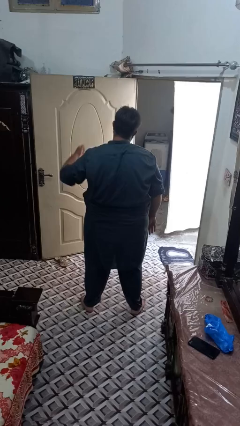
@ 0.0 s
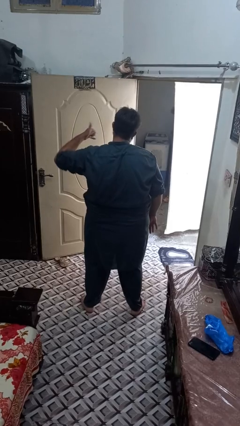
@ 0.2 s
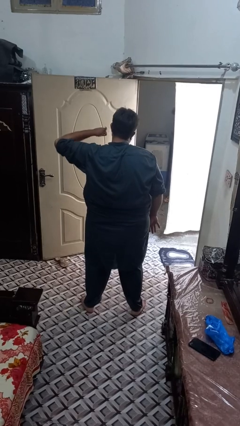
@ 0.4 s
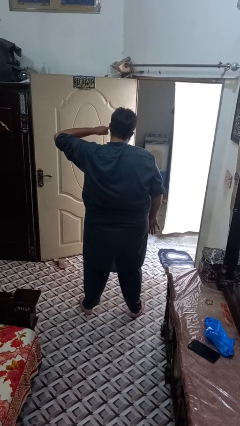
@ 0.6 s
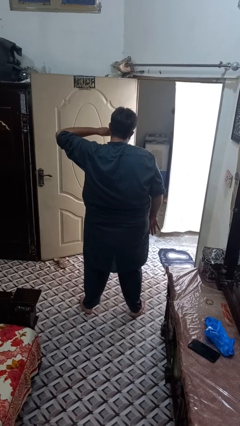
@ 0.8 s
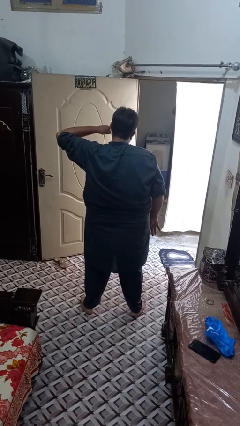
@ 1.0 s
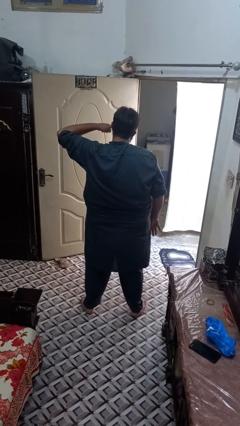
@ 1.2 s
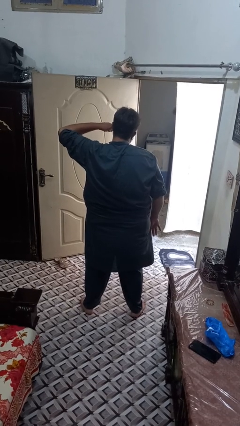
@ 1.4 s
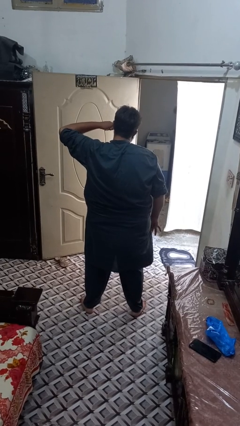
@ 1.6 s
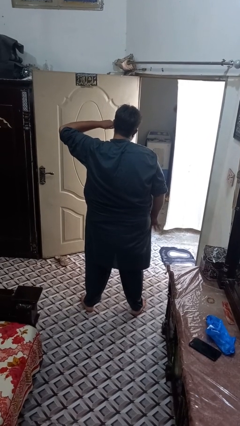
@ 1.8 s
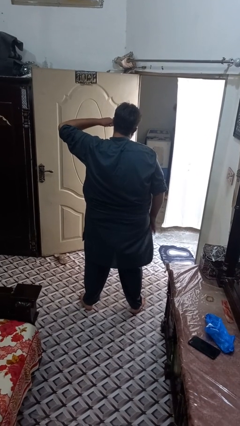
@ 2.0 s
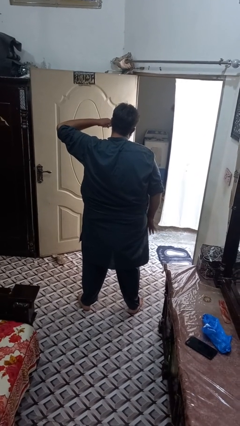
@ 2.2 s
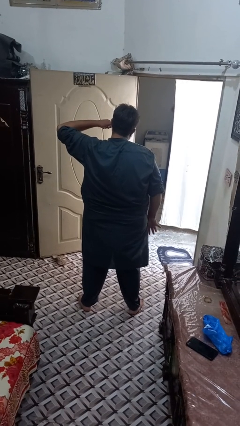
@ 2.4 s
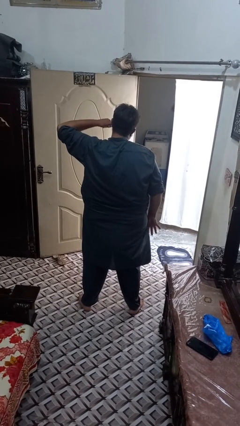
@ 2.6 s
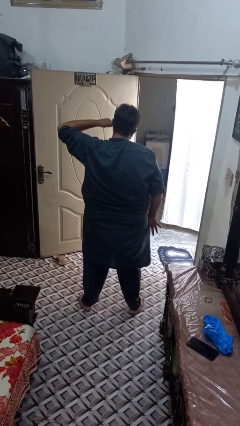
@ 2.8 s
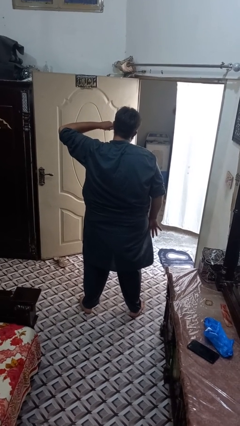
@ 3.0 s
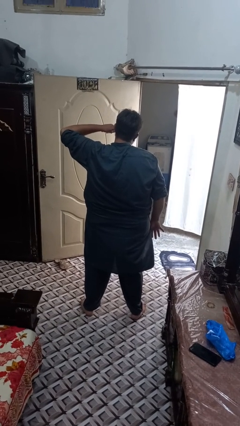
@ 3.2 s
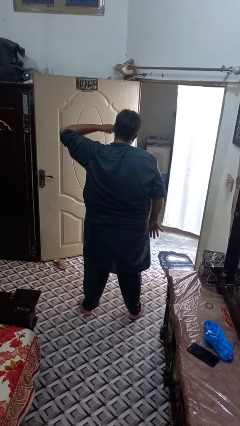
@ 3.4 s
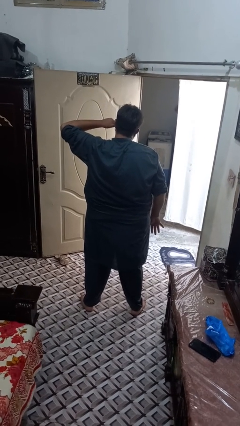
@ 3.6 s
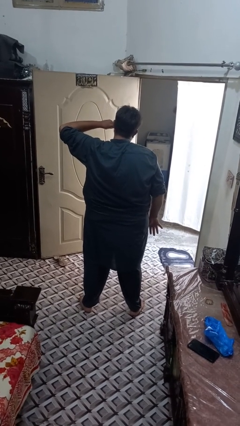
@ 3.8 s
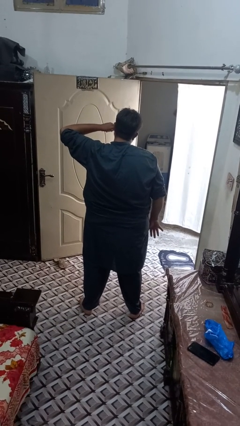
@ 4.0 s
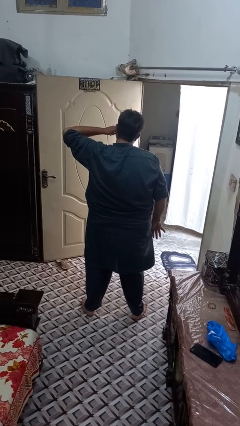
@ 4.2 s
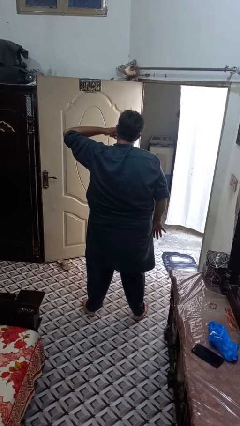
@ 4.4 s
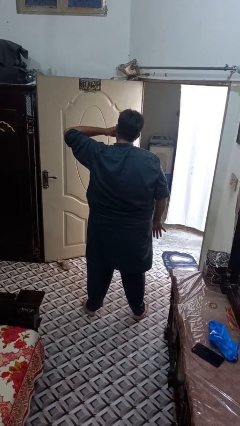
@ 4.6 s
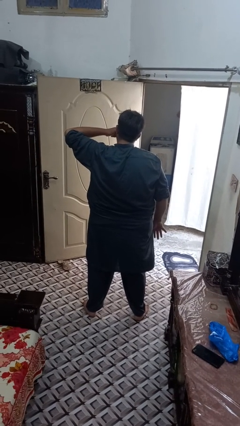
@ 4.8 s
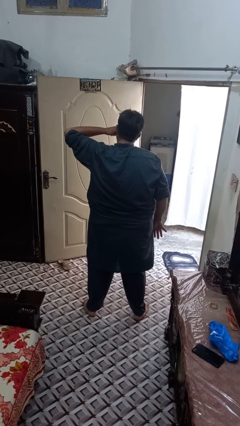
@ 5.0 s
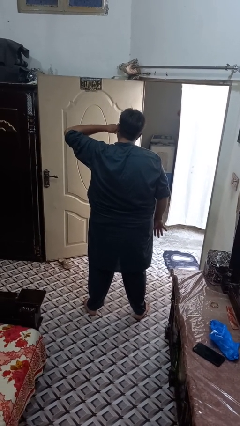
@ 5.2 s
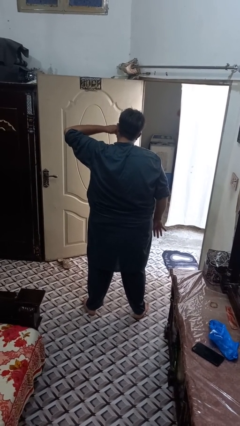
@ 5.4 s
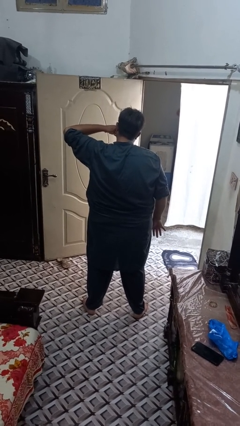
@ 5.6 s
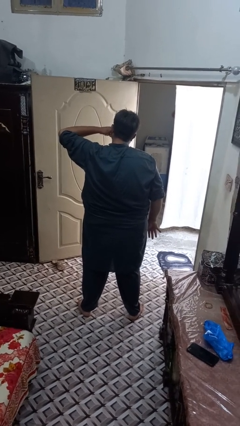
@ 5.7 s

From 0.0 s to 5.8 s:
person gestures call me

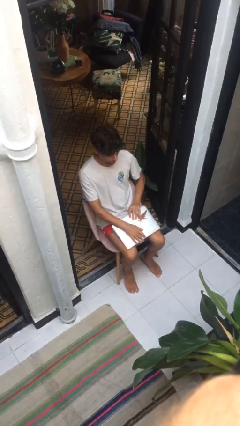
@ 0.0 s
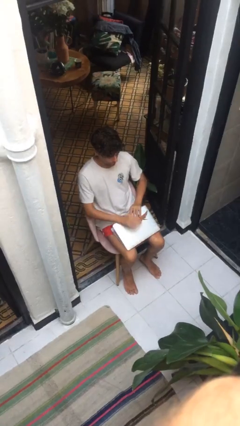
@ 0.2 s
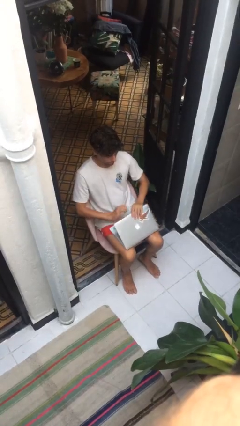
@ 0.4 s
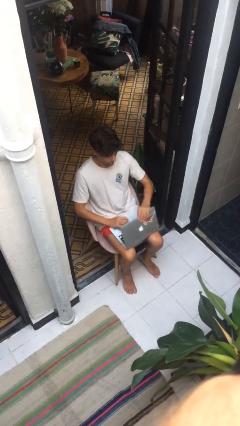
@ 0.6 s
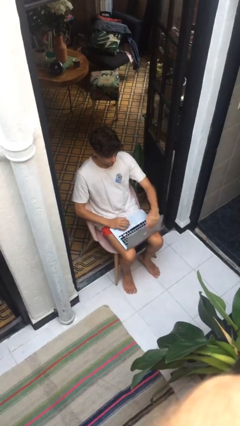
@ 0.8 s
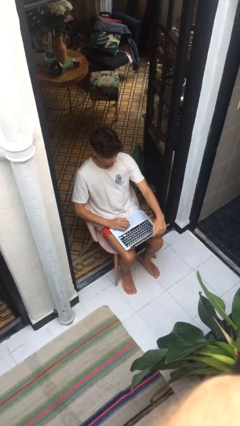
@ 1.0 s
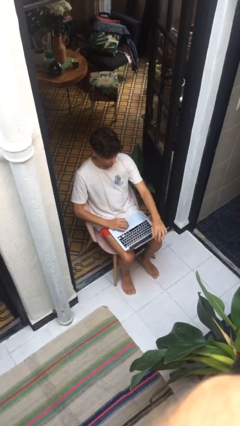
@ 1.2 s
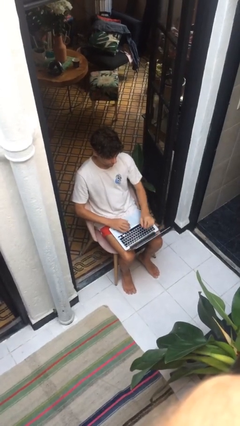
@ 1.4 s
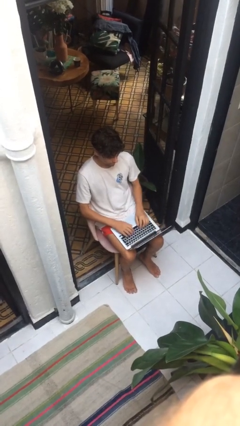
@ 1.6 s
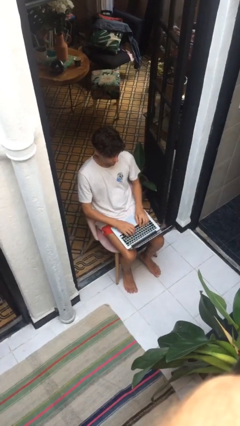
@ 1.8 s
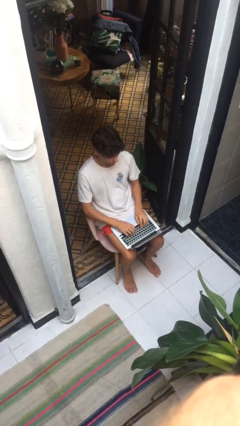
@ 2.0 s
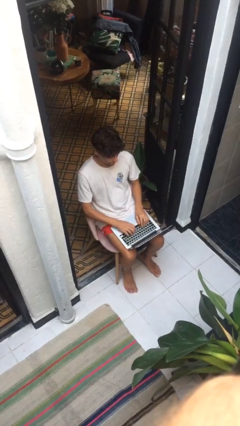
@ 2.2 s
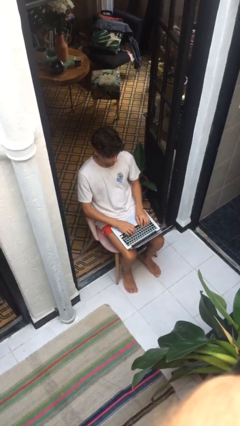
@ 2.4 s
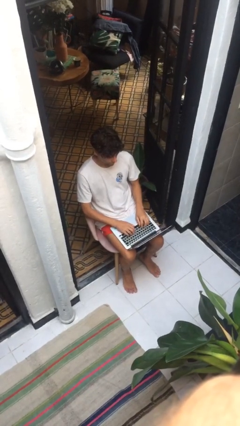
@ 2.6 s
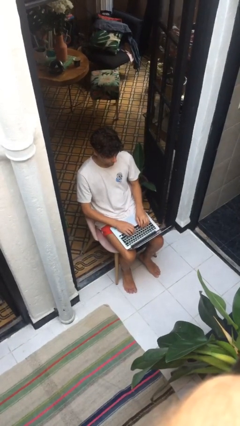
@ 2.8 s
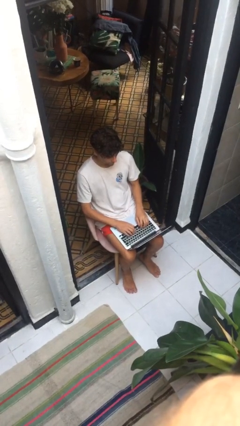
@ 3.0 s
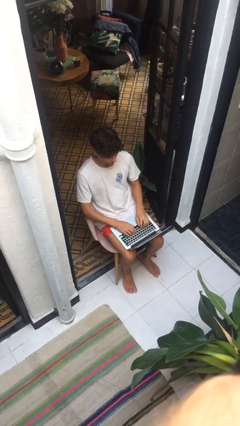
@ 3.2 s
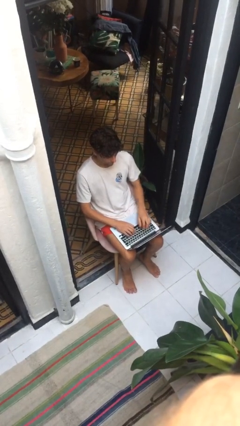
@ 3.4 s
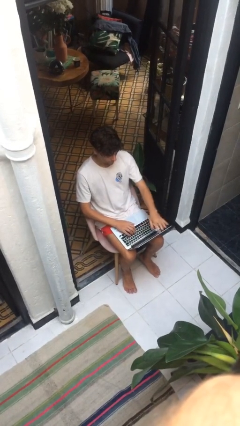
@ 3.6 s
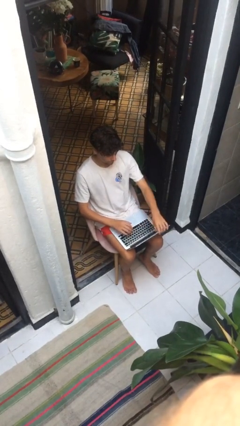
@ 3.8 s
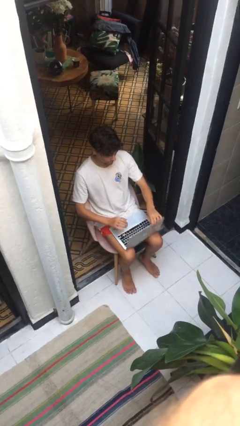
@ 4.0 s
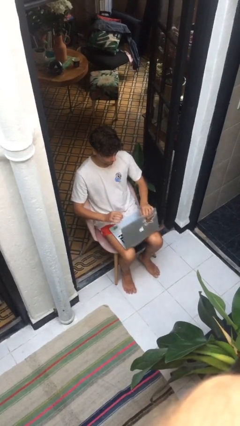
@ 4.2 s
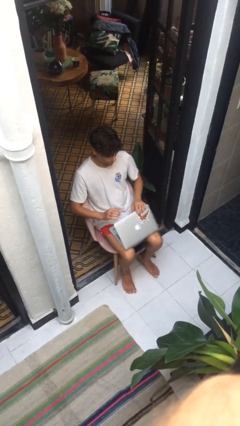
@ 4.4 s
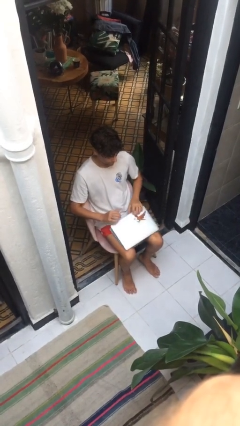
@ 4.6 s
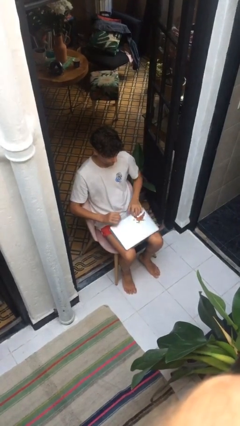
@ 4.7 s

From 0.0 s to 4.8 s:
person interacts with laptop

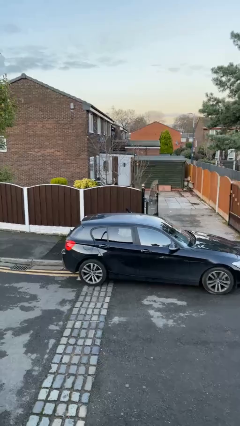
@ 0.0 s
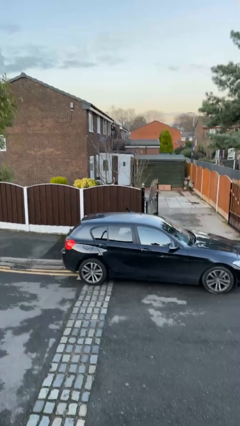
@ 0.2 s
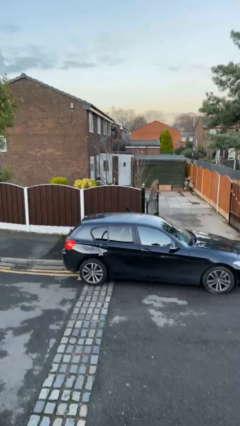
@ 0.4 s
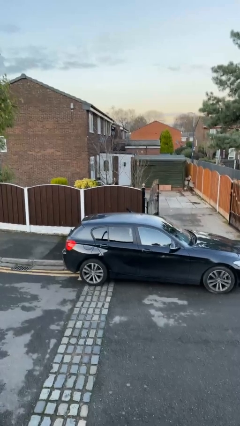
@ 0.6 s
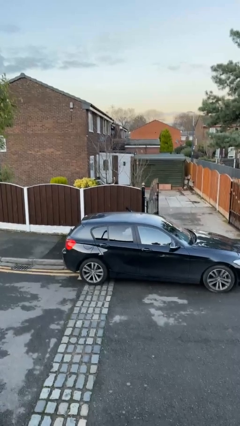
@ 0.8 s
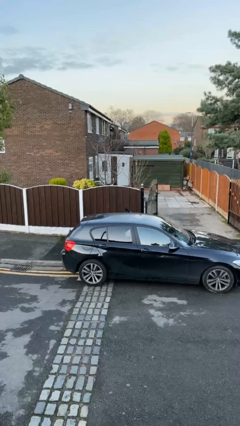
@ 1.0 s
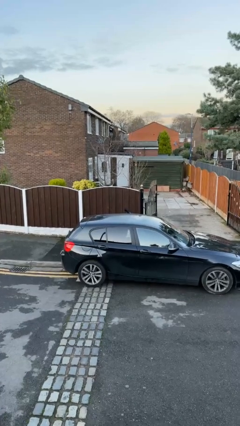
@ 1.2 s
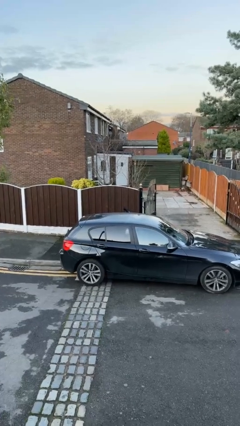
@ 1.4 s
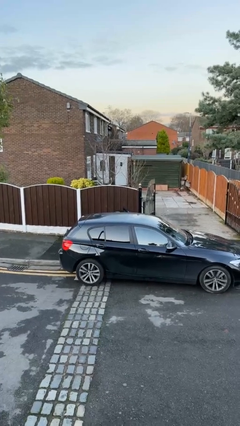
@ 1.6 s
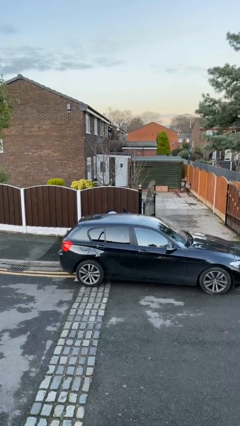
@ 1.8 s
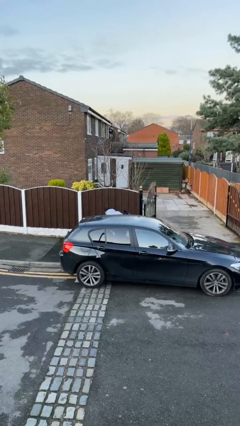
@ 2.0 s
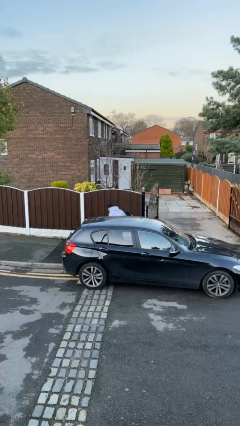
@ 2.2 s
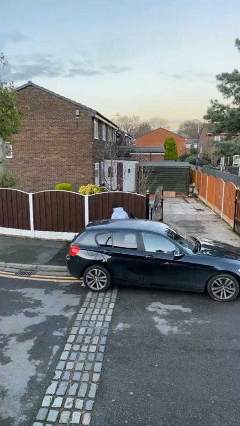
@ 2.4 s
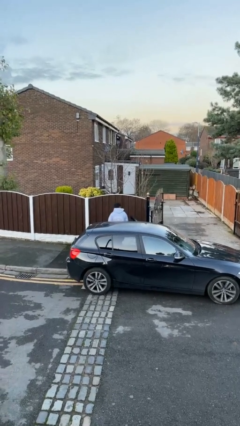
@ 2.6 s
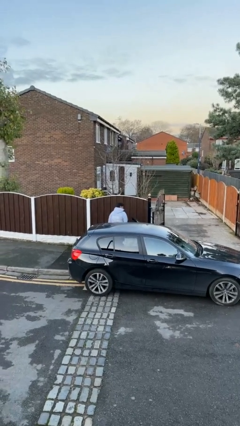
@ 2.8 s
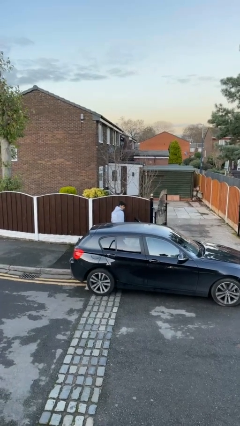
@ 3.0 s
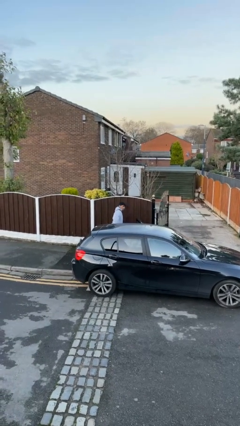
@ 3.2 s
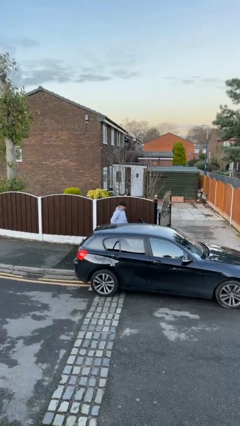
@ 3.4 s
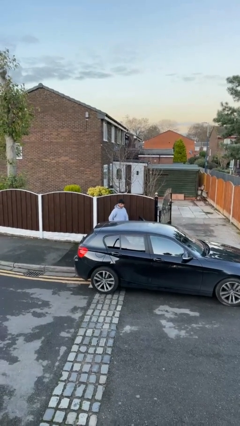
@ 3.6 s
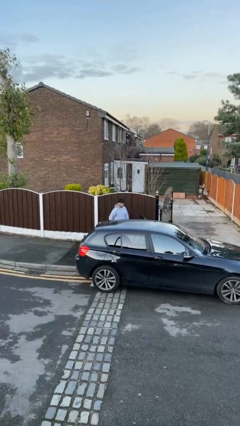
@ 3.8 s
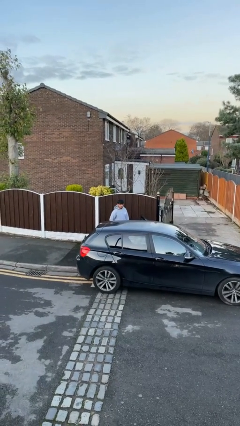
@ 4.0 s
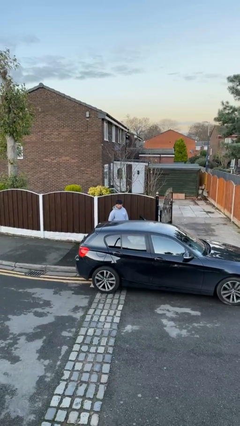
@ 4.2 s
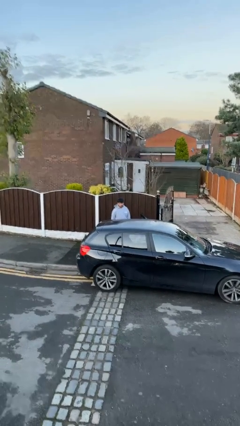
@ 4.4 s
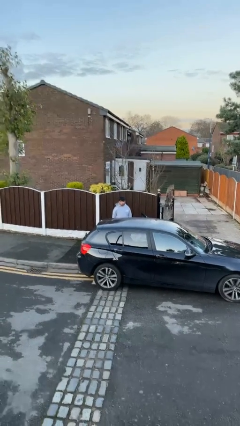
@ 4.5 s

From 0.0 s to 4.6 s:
person exits car

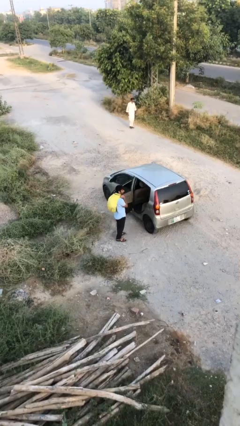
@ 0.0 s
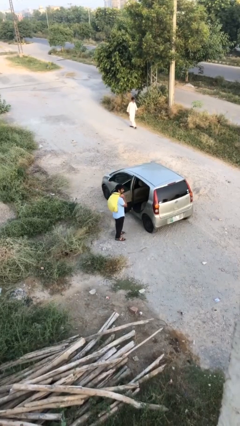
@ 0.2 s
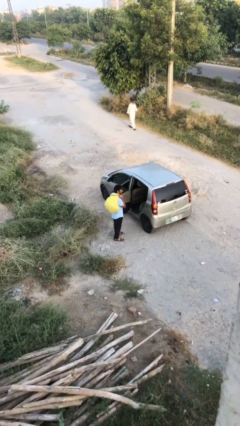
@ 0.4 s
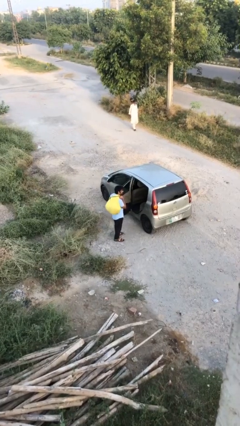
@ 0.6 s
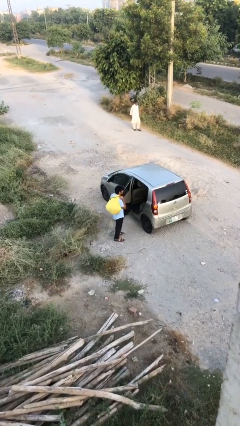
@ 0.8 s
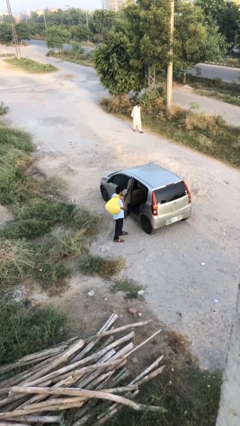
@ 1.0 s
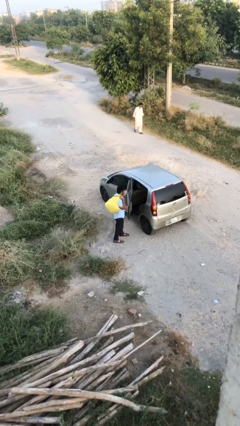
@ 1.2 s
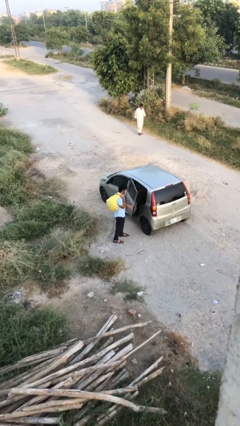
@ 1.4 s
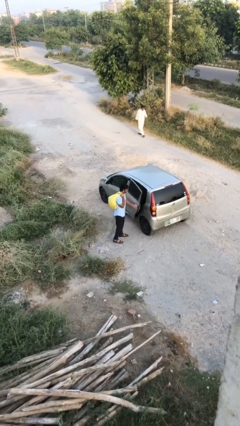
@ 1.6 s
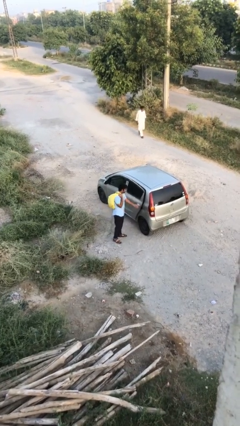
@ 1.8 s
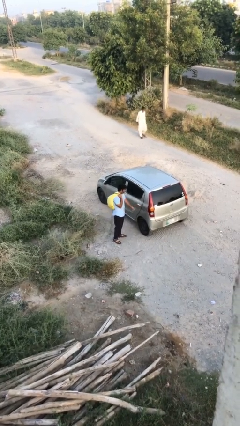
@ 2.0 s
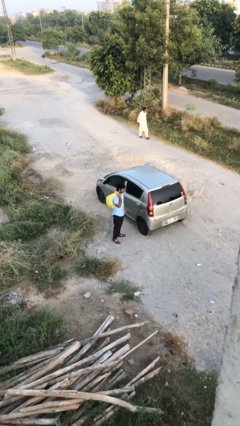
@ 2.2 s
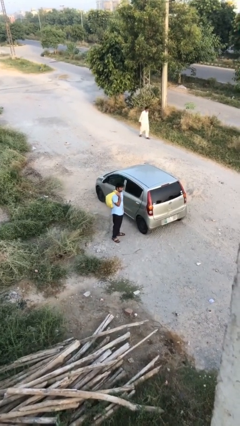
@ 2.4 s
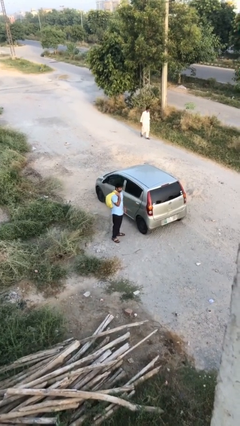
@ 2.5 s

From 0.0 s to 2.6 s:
person closes car door
